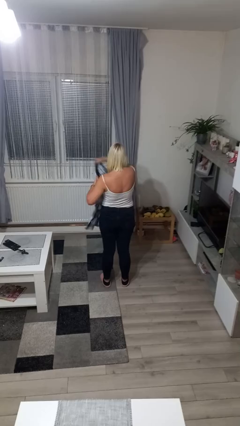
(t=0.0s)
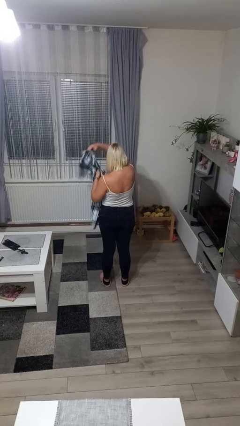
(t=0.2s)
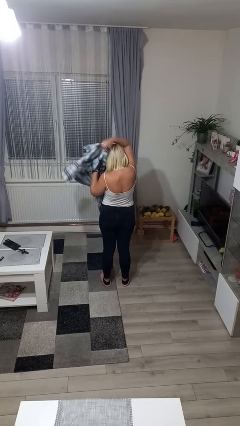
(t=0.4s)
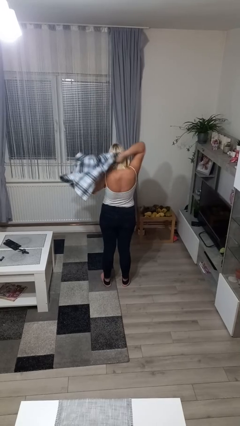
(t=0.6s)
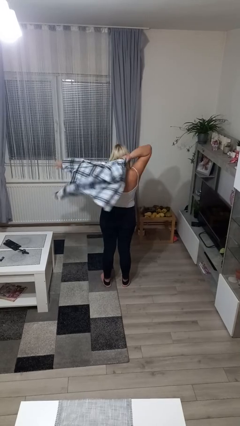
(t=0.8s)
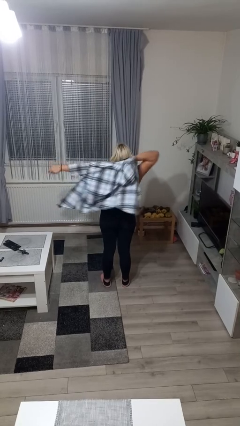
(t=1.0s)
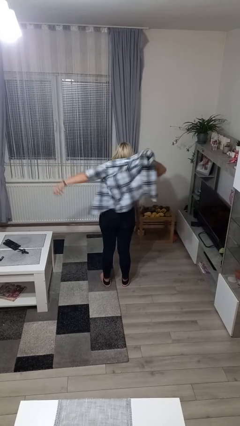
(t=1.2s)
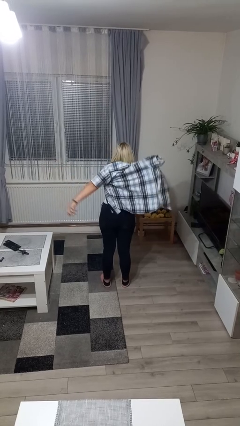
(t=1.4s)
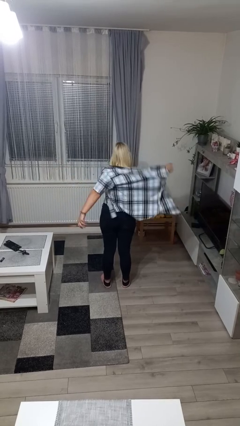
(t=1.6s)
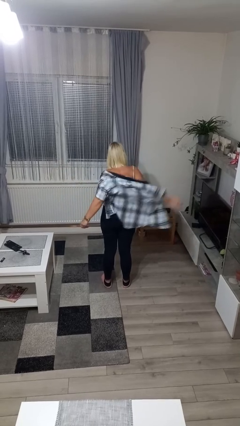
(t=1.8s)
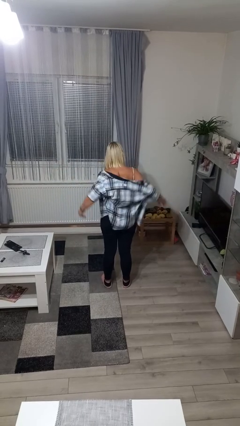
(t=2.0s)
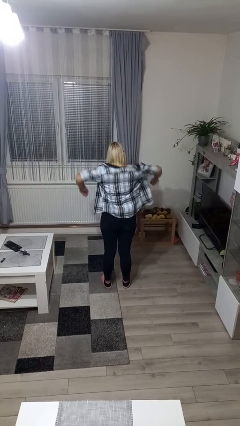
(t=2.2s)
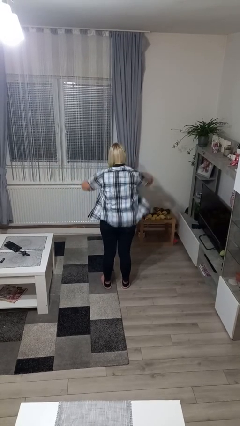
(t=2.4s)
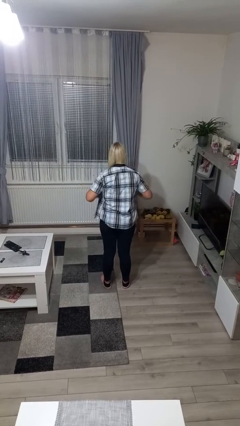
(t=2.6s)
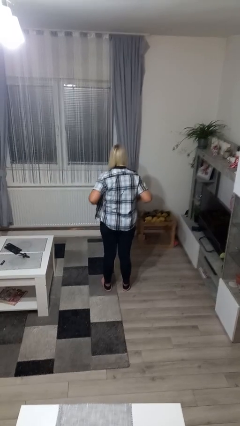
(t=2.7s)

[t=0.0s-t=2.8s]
person puts on shirt

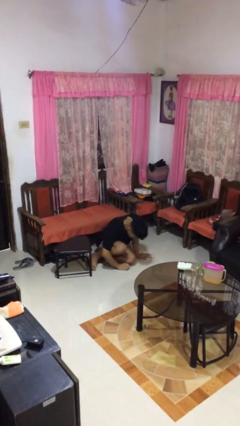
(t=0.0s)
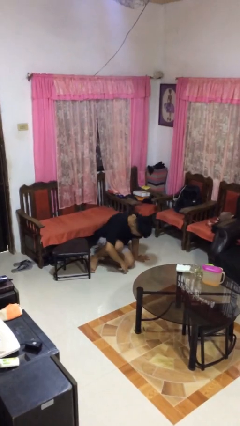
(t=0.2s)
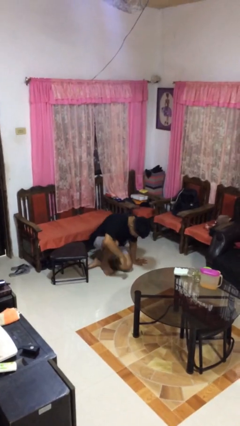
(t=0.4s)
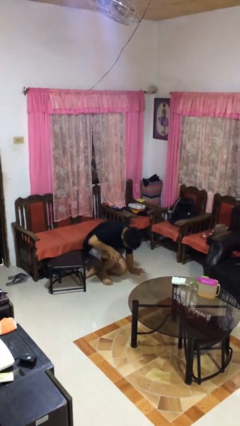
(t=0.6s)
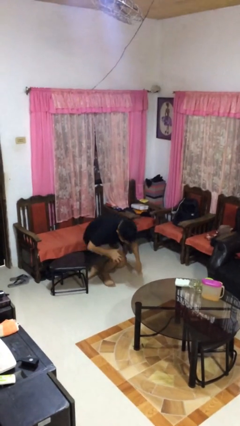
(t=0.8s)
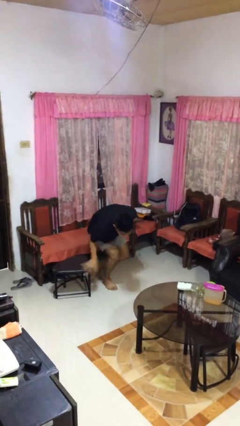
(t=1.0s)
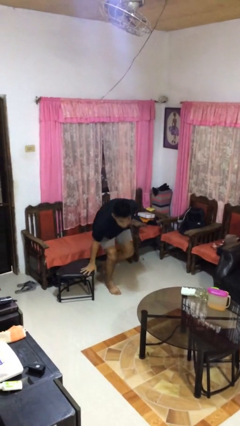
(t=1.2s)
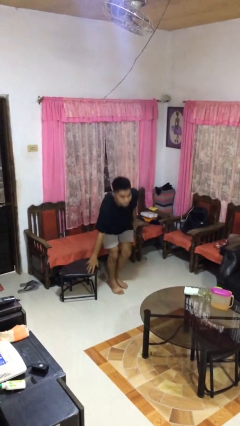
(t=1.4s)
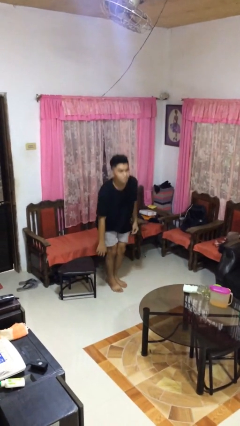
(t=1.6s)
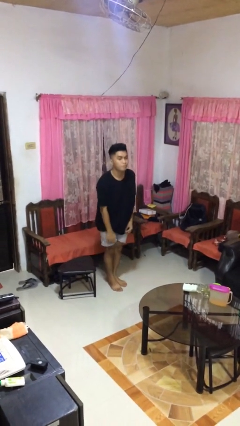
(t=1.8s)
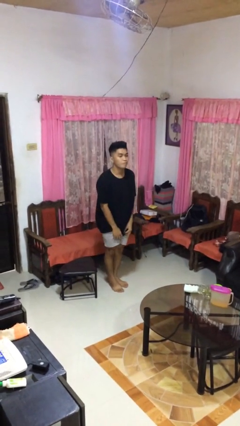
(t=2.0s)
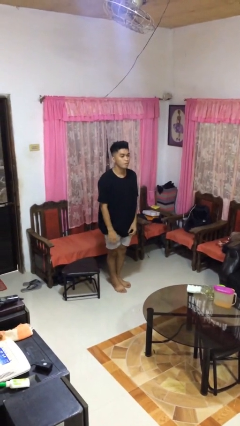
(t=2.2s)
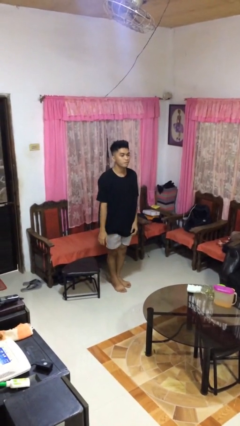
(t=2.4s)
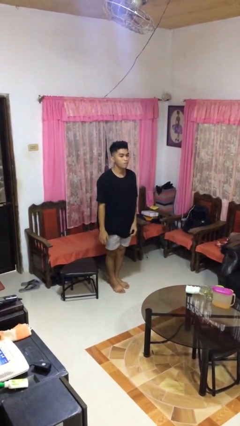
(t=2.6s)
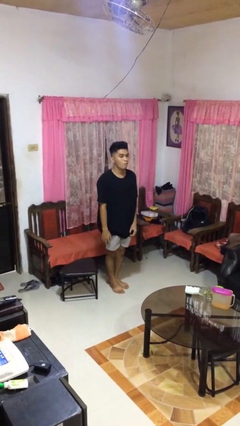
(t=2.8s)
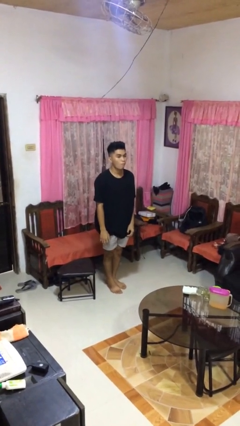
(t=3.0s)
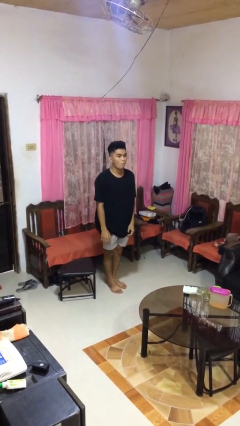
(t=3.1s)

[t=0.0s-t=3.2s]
person stands up from floor

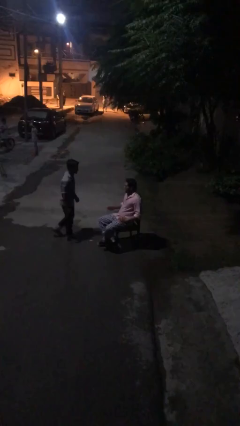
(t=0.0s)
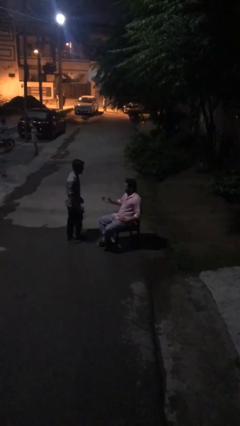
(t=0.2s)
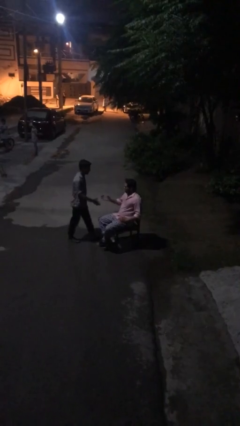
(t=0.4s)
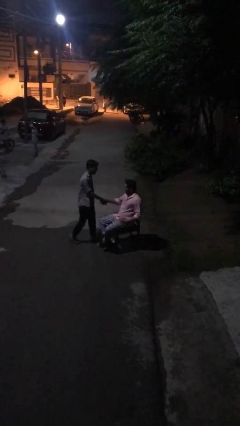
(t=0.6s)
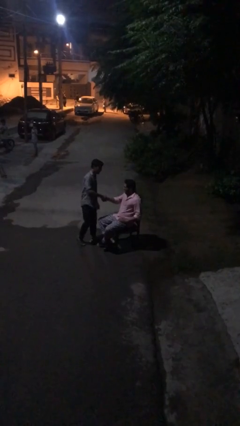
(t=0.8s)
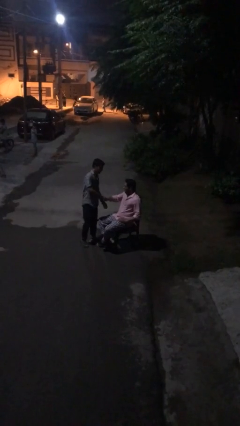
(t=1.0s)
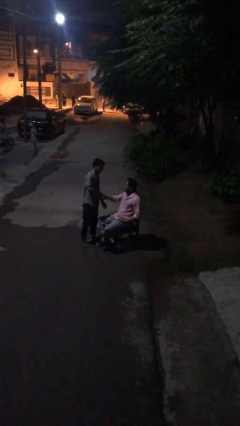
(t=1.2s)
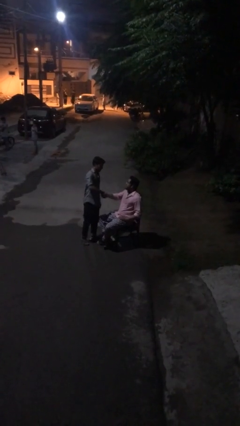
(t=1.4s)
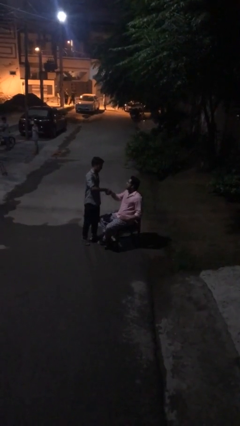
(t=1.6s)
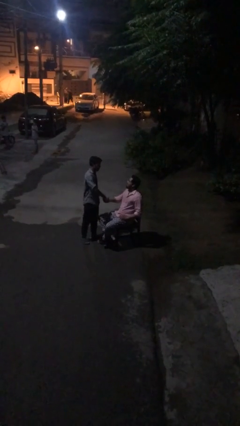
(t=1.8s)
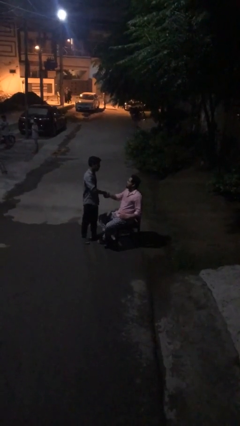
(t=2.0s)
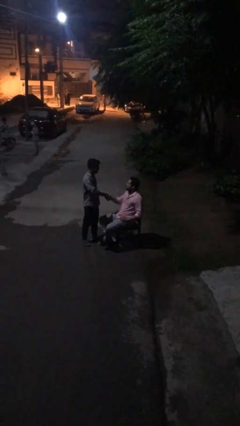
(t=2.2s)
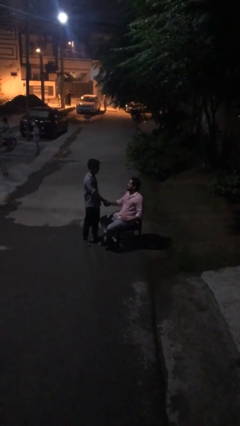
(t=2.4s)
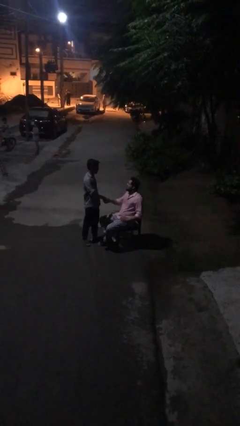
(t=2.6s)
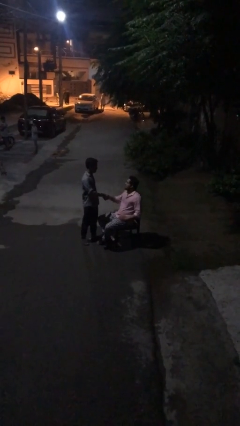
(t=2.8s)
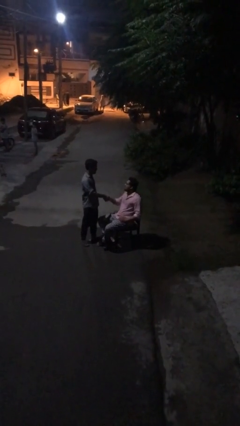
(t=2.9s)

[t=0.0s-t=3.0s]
person shakes hand

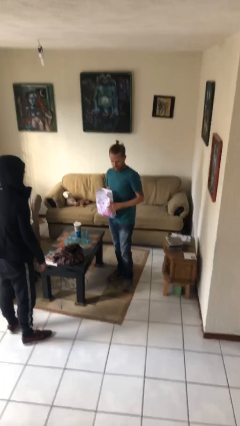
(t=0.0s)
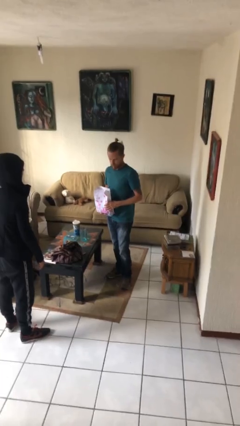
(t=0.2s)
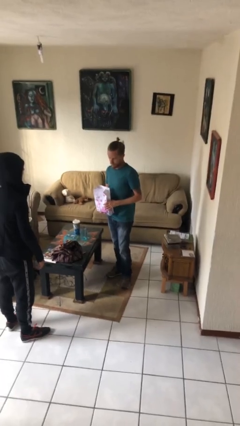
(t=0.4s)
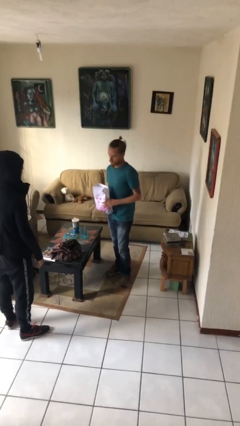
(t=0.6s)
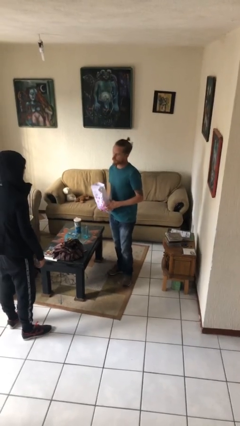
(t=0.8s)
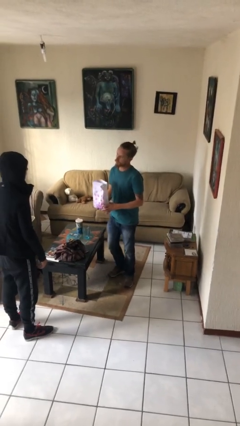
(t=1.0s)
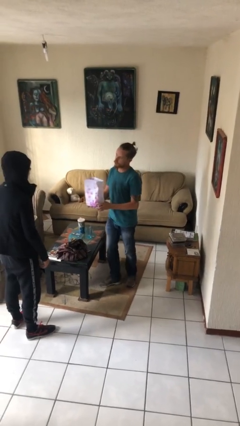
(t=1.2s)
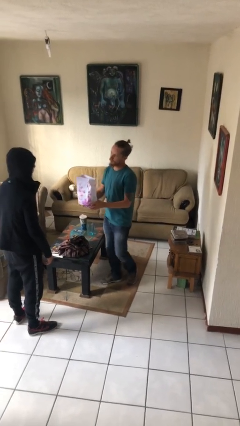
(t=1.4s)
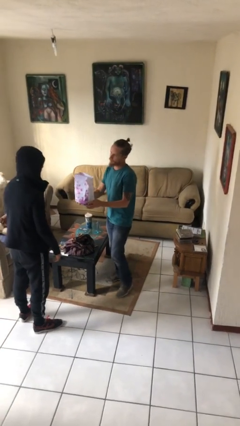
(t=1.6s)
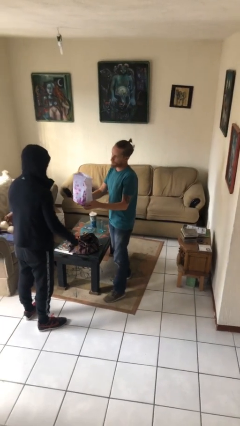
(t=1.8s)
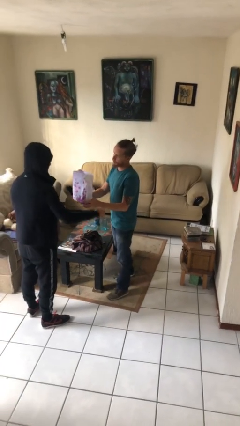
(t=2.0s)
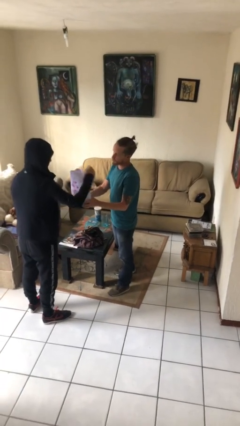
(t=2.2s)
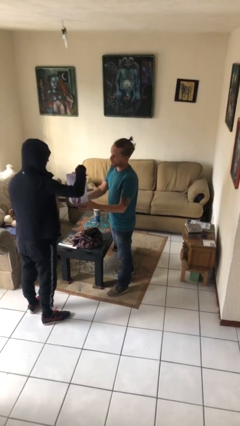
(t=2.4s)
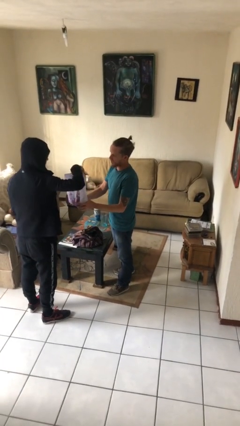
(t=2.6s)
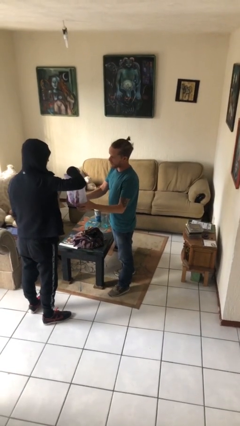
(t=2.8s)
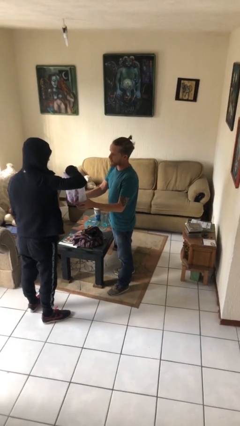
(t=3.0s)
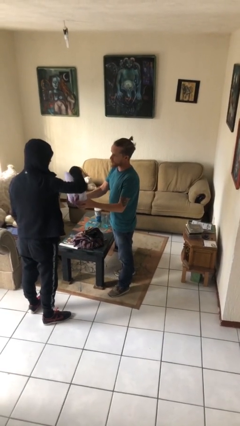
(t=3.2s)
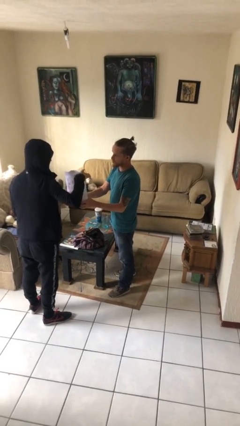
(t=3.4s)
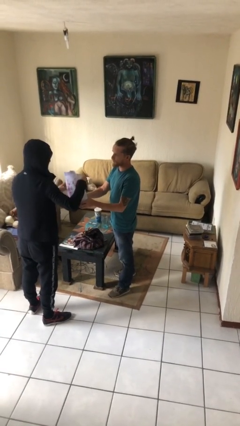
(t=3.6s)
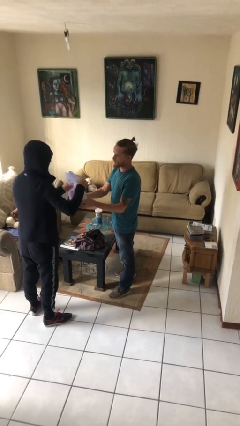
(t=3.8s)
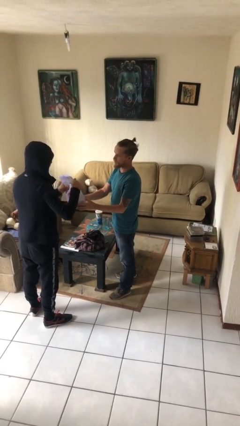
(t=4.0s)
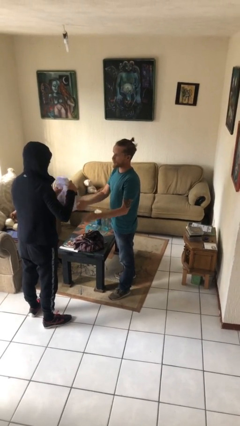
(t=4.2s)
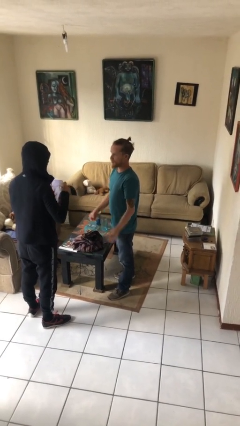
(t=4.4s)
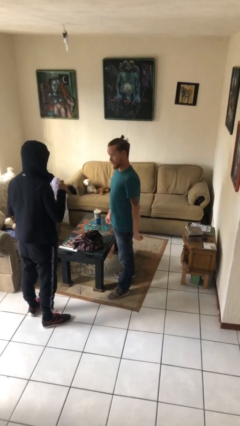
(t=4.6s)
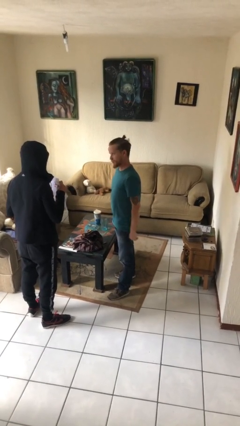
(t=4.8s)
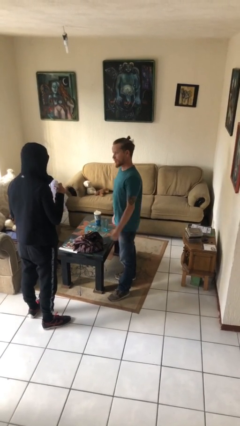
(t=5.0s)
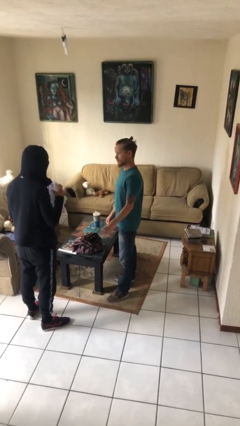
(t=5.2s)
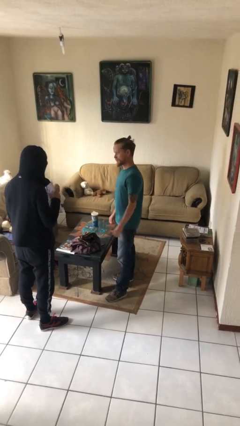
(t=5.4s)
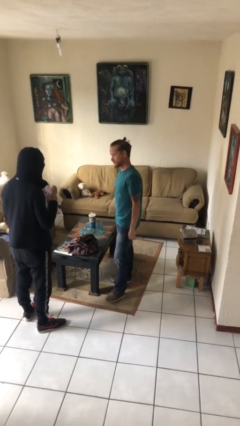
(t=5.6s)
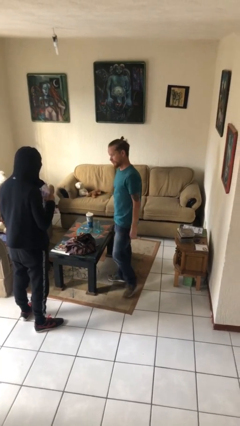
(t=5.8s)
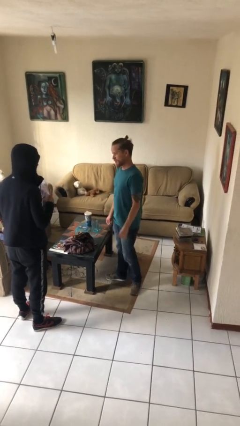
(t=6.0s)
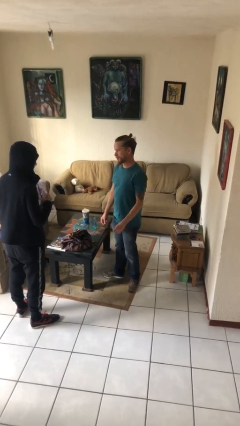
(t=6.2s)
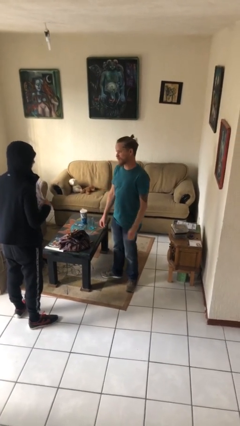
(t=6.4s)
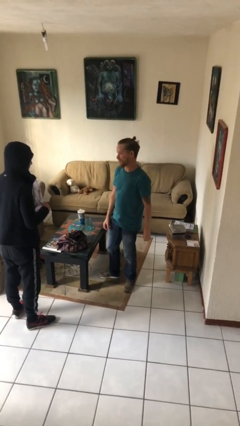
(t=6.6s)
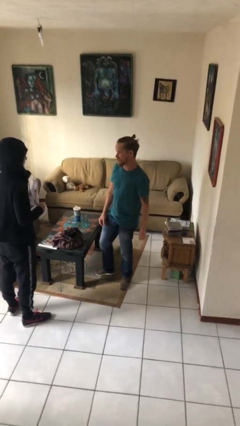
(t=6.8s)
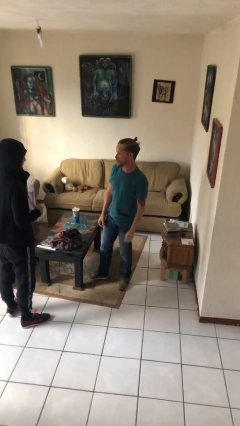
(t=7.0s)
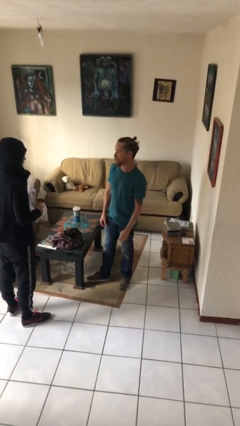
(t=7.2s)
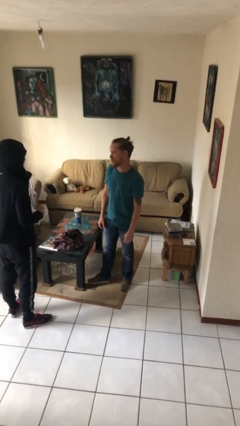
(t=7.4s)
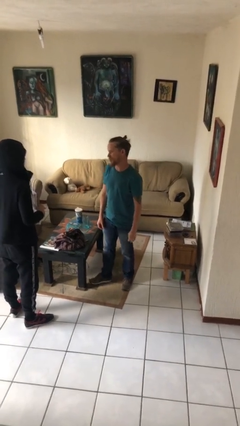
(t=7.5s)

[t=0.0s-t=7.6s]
person transfers object to person

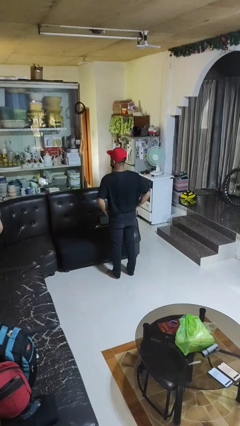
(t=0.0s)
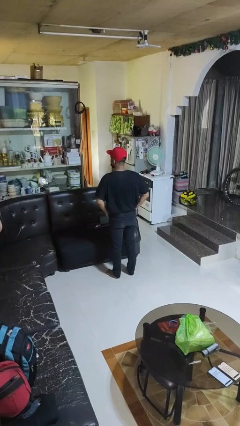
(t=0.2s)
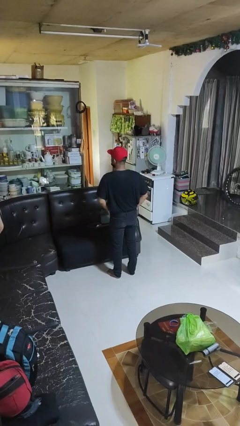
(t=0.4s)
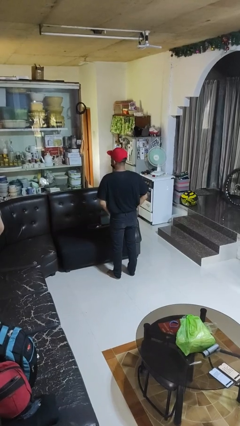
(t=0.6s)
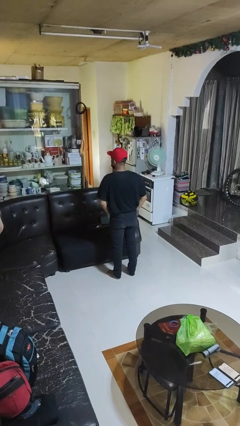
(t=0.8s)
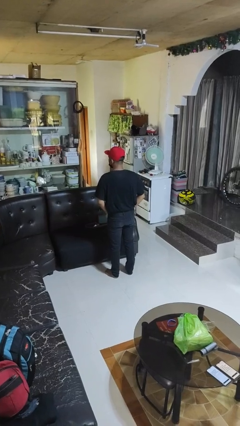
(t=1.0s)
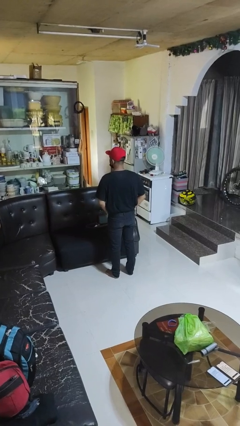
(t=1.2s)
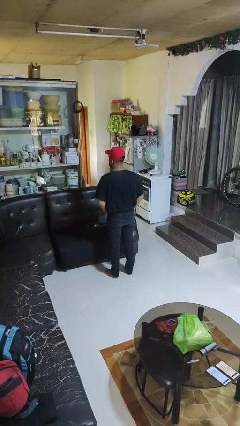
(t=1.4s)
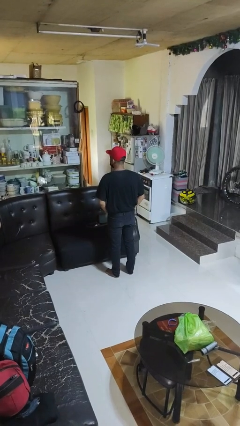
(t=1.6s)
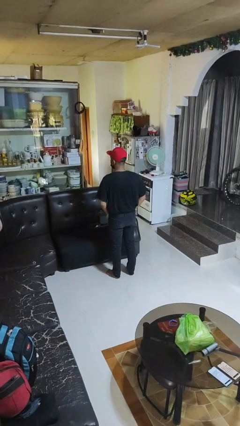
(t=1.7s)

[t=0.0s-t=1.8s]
person puts hands in back pockets
